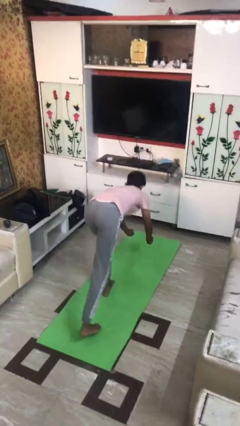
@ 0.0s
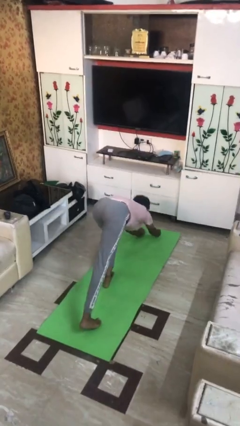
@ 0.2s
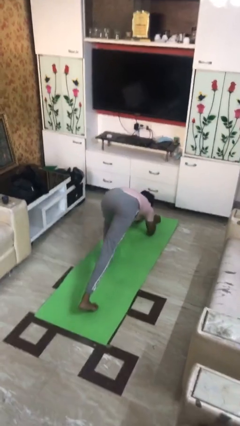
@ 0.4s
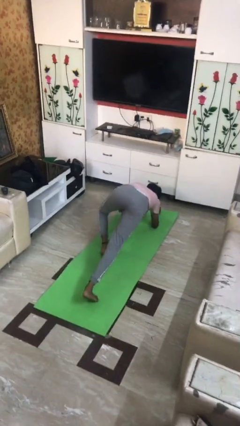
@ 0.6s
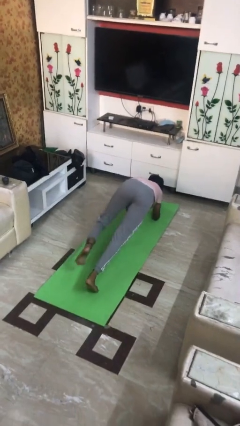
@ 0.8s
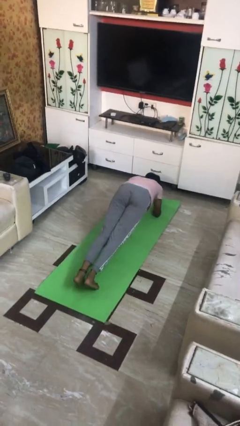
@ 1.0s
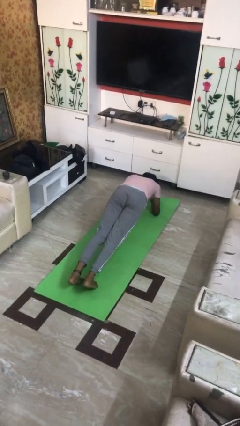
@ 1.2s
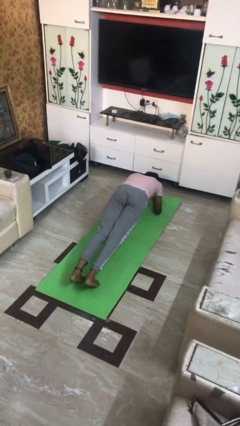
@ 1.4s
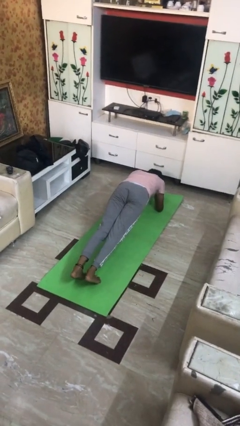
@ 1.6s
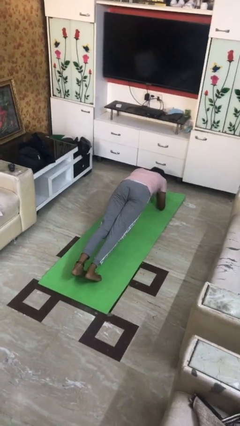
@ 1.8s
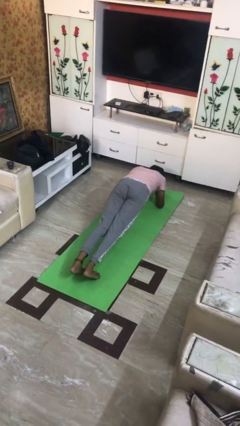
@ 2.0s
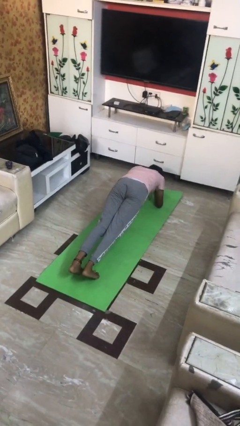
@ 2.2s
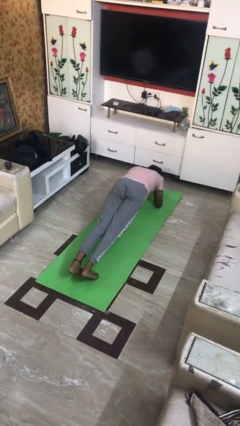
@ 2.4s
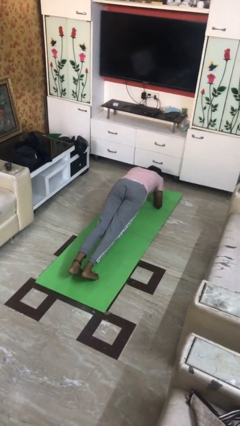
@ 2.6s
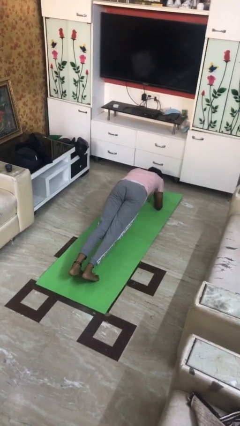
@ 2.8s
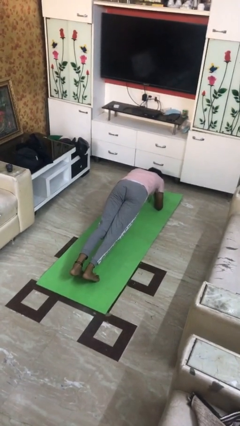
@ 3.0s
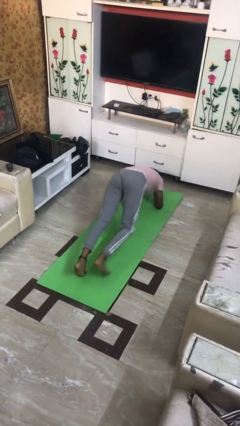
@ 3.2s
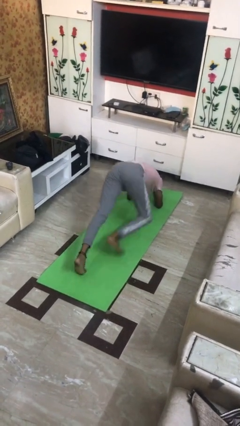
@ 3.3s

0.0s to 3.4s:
person exercises with plank

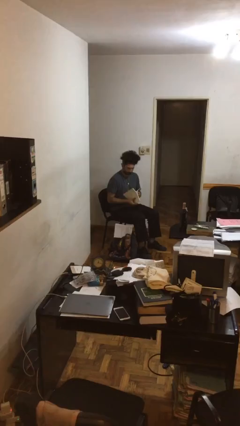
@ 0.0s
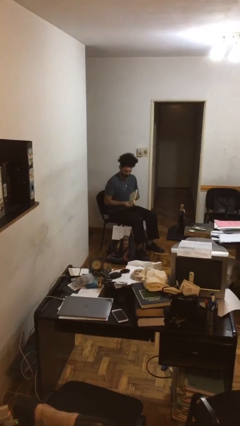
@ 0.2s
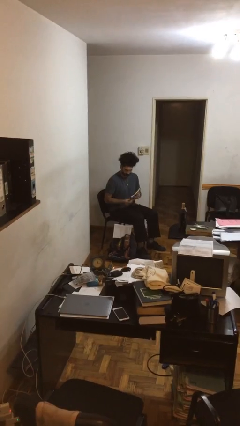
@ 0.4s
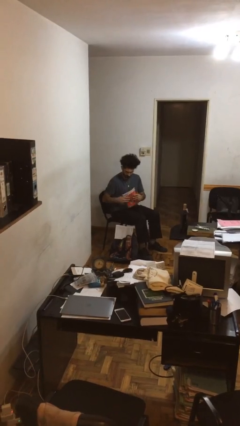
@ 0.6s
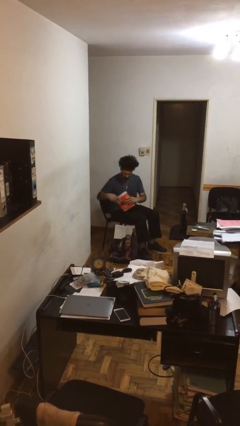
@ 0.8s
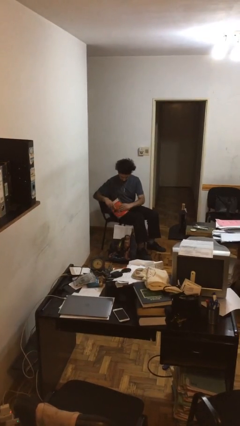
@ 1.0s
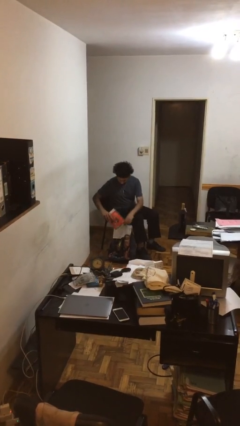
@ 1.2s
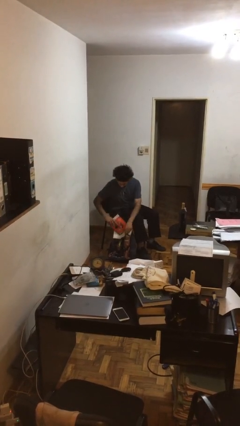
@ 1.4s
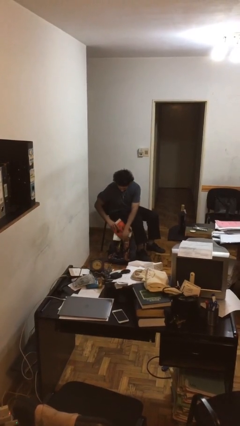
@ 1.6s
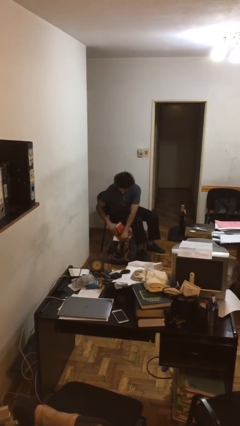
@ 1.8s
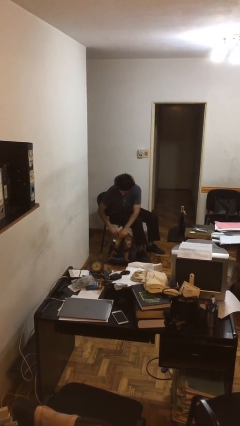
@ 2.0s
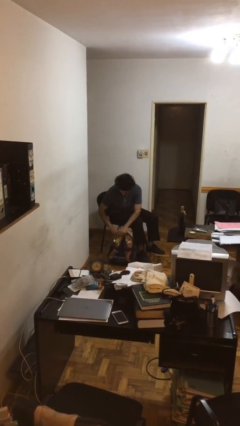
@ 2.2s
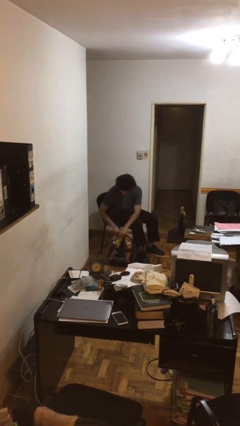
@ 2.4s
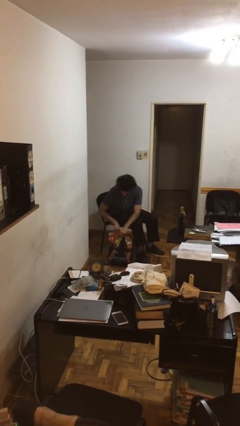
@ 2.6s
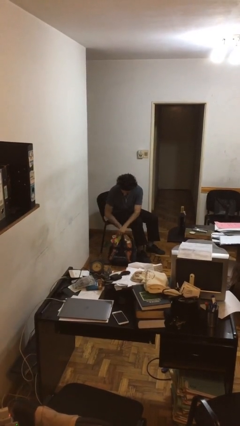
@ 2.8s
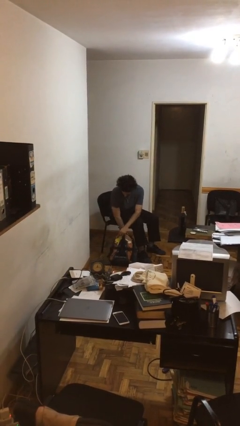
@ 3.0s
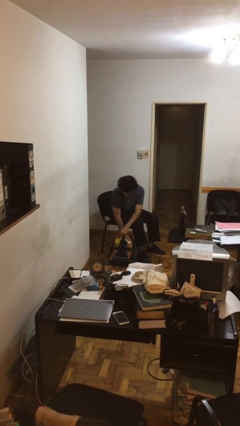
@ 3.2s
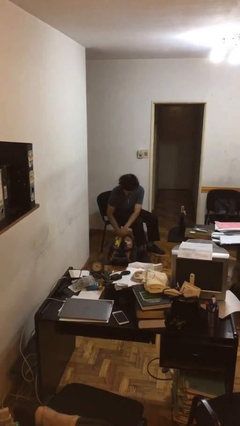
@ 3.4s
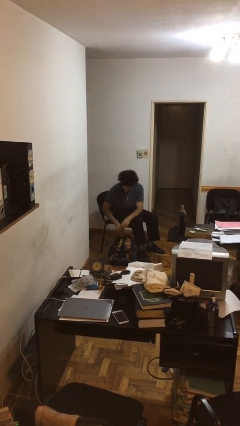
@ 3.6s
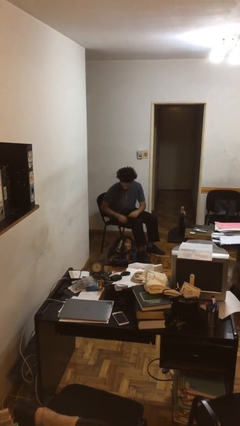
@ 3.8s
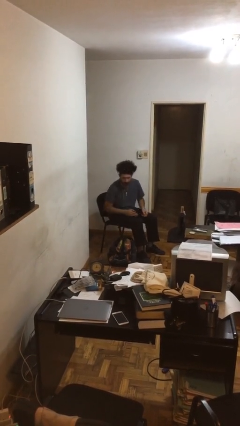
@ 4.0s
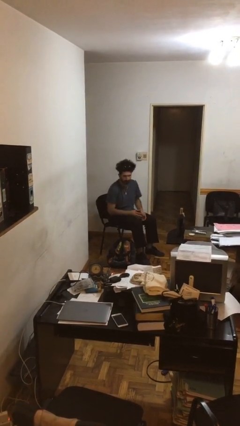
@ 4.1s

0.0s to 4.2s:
person puts object into backpack

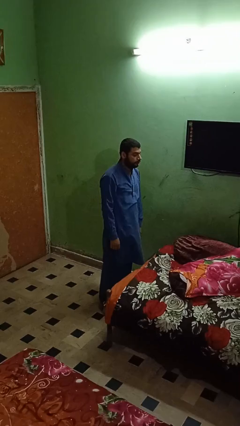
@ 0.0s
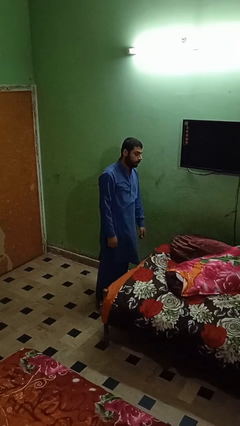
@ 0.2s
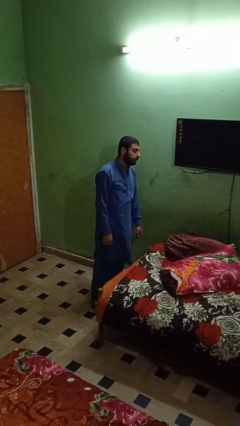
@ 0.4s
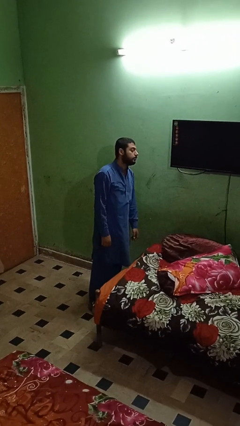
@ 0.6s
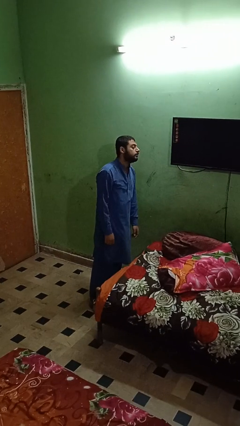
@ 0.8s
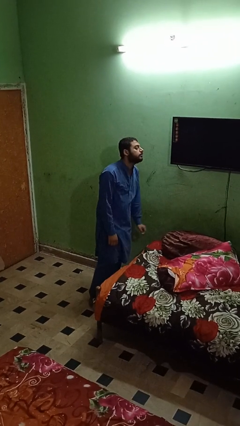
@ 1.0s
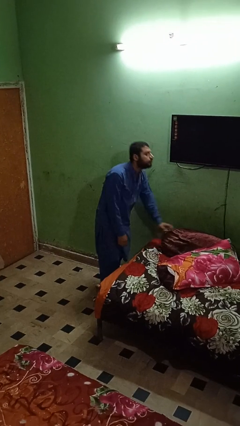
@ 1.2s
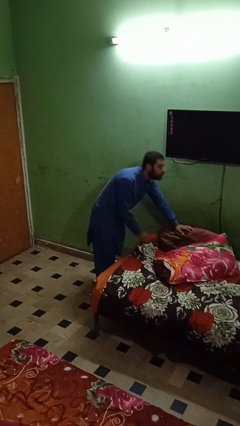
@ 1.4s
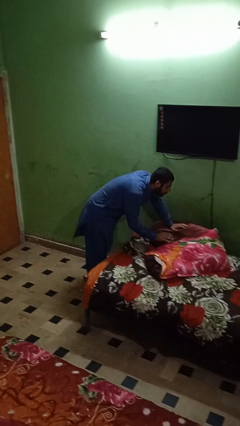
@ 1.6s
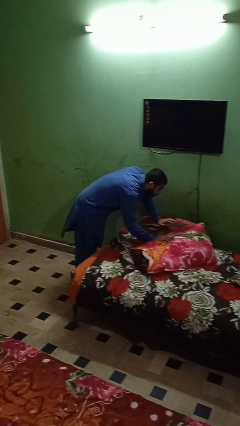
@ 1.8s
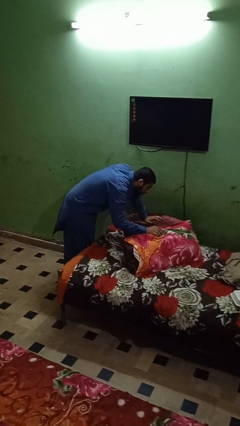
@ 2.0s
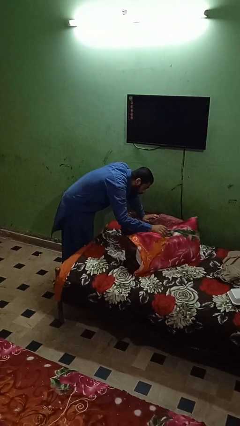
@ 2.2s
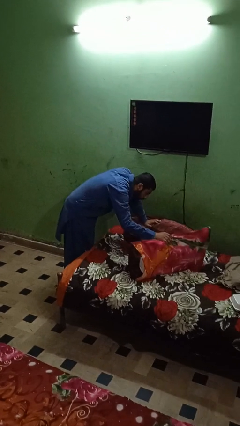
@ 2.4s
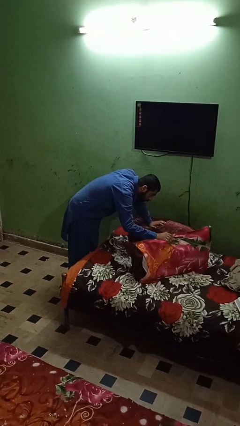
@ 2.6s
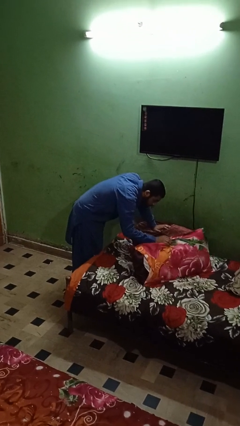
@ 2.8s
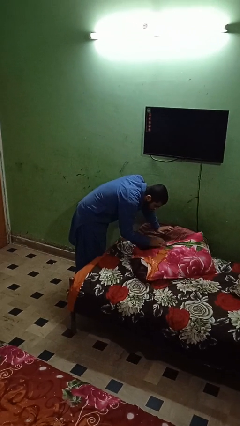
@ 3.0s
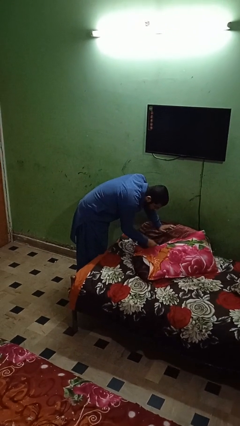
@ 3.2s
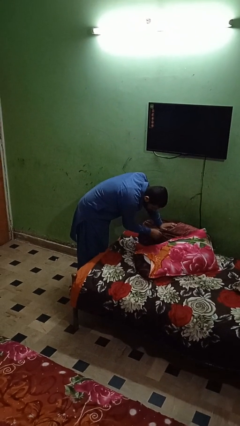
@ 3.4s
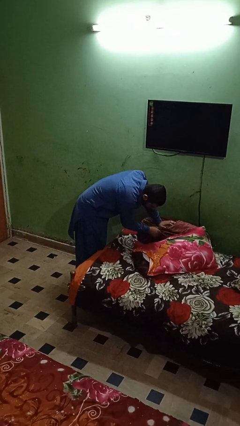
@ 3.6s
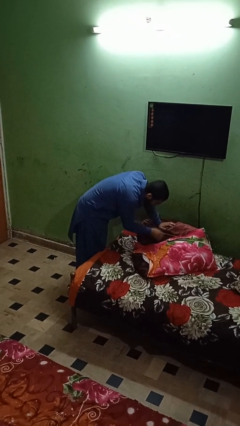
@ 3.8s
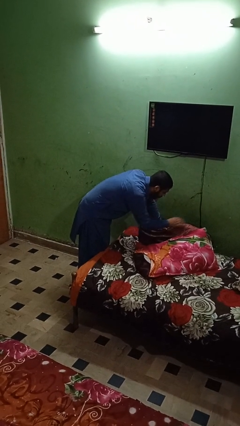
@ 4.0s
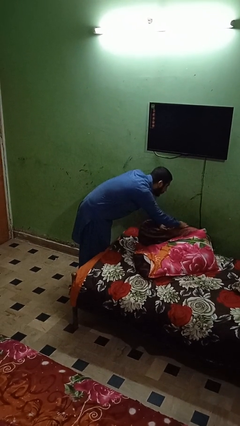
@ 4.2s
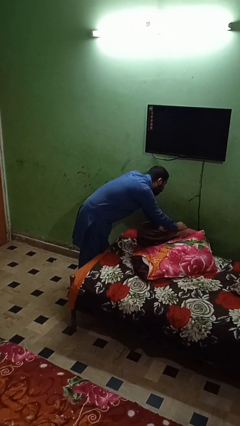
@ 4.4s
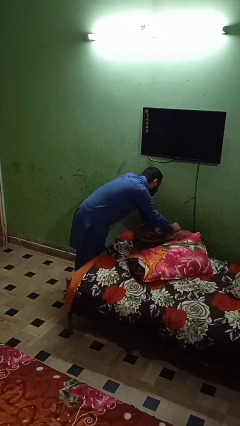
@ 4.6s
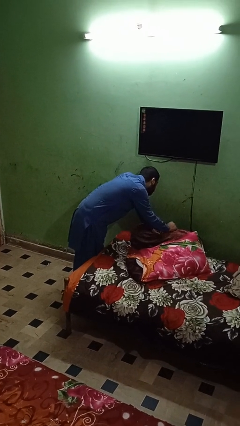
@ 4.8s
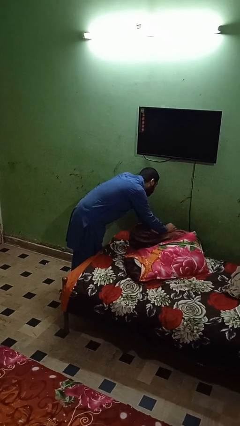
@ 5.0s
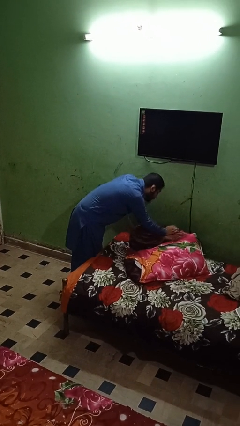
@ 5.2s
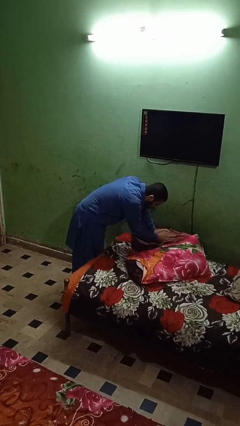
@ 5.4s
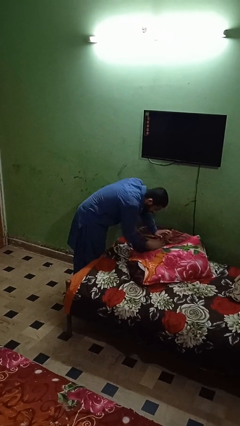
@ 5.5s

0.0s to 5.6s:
person searches in couch

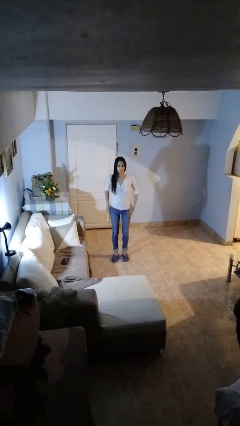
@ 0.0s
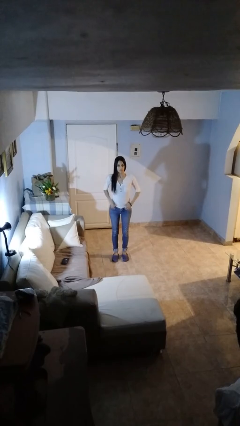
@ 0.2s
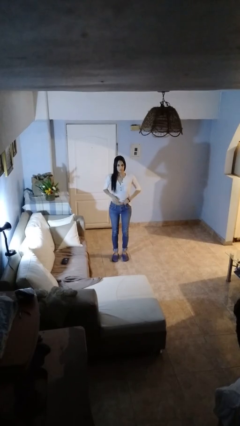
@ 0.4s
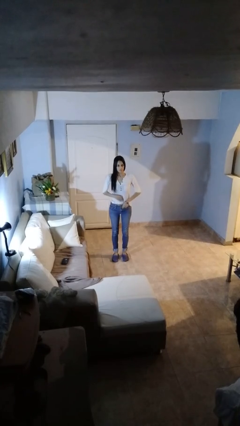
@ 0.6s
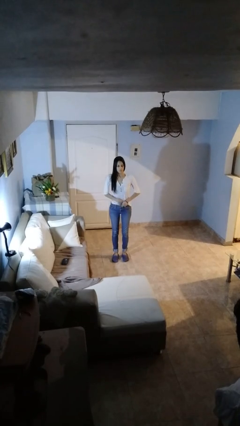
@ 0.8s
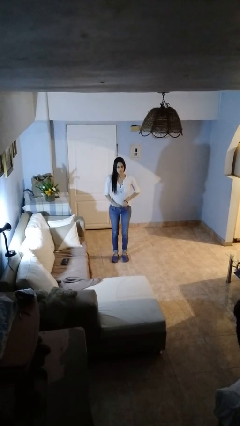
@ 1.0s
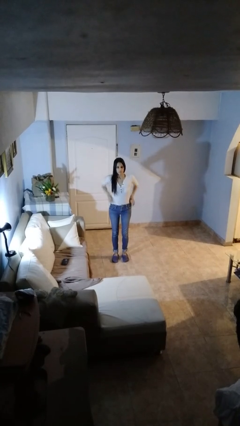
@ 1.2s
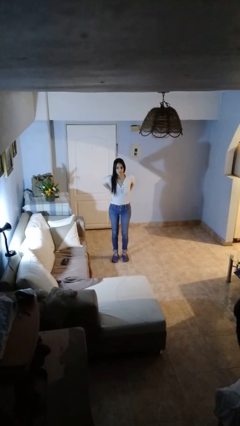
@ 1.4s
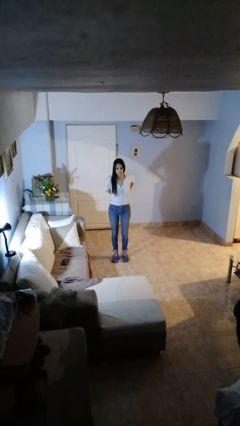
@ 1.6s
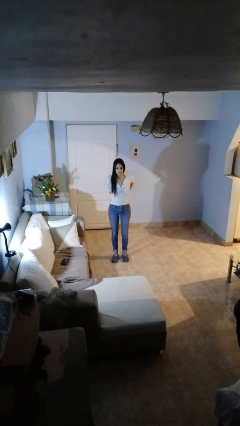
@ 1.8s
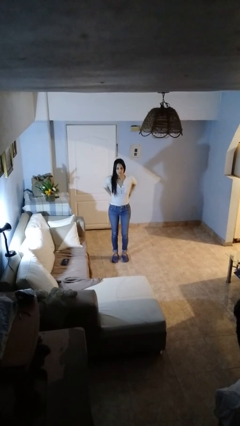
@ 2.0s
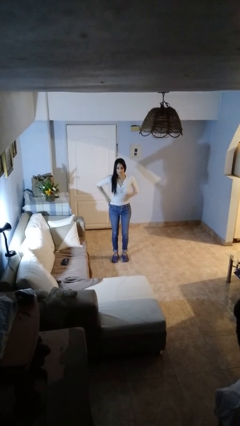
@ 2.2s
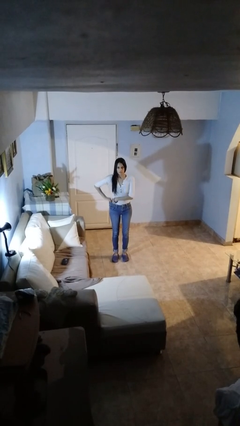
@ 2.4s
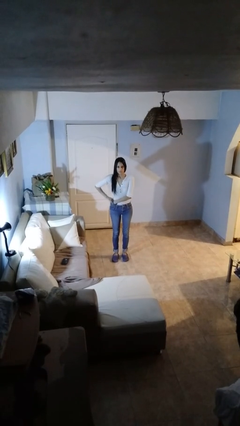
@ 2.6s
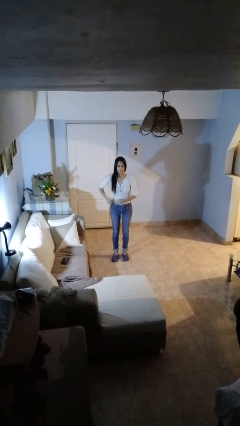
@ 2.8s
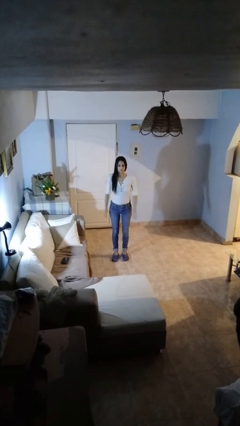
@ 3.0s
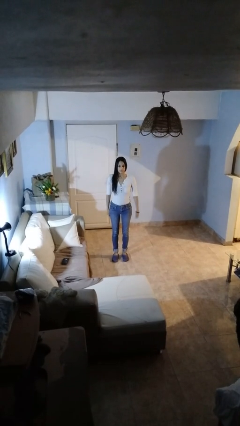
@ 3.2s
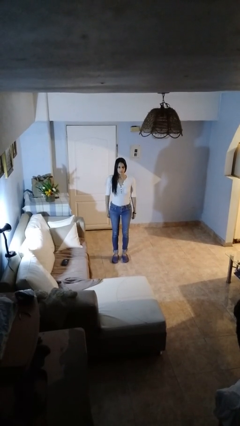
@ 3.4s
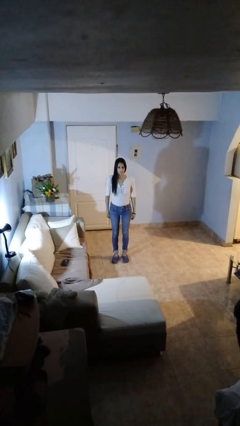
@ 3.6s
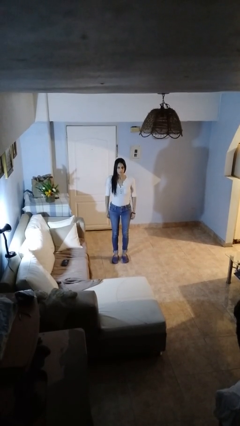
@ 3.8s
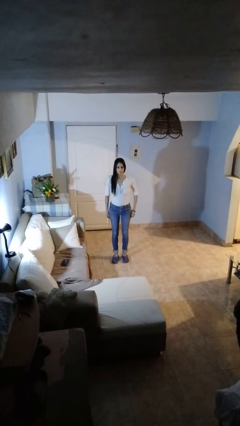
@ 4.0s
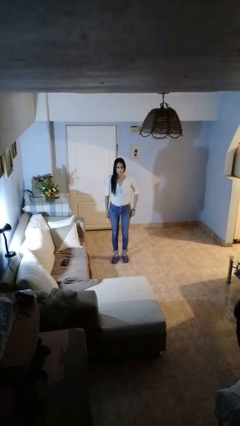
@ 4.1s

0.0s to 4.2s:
person tucks in shirt

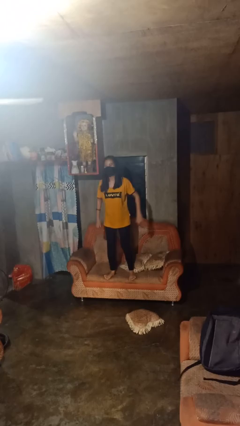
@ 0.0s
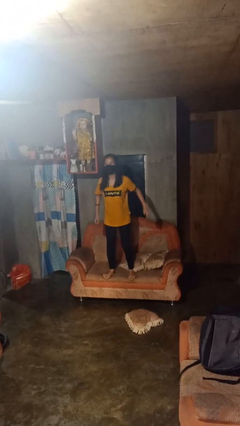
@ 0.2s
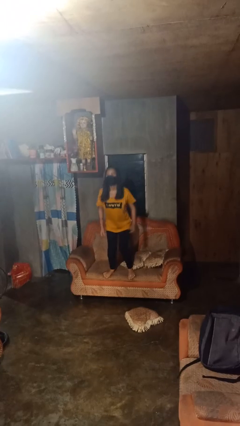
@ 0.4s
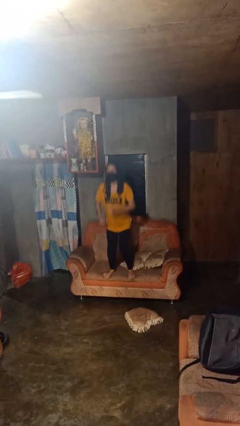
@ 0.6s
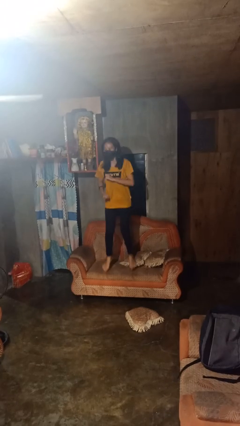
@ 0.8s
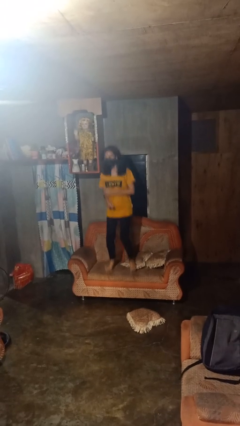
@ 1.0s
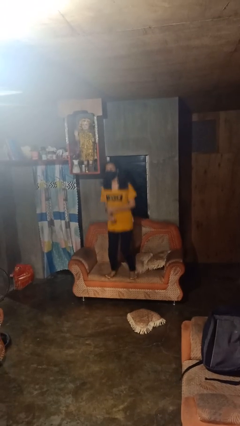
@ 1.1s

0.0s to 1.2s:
person jumps on couch
